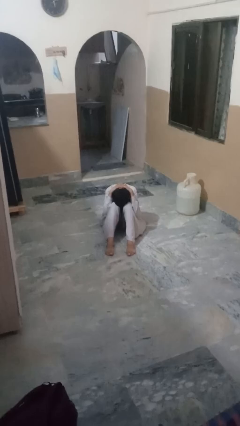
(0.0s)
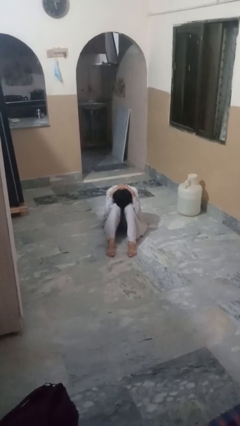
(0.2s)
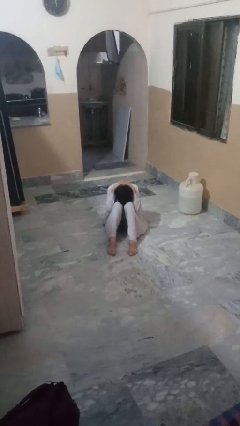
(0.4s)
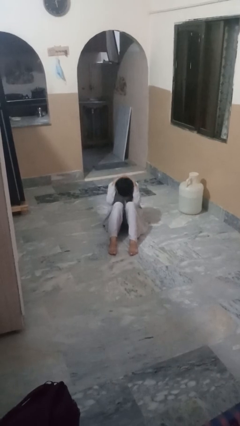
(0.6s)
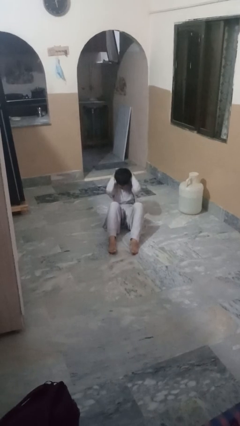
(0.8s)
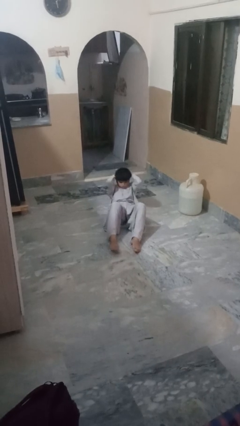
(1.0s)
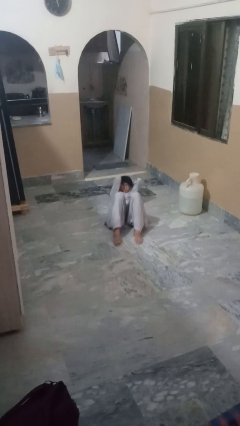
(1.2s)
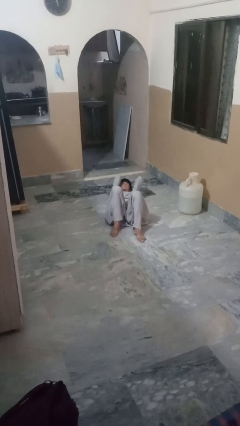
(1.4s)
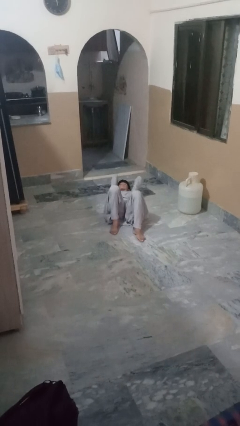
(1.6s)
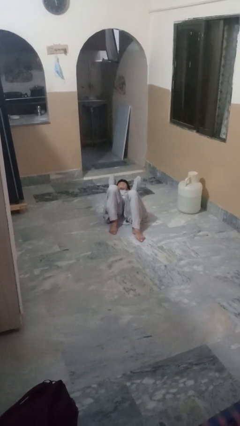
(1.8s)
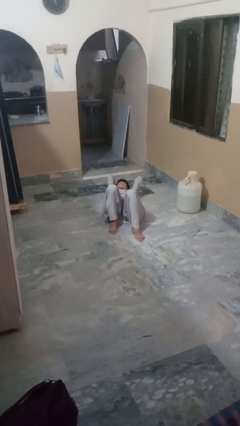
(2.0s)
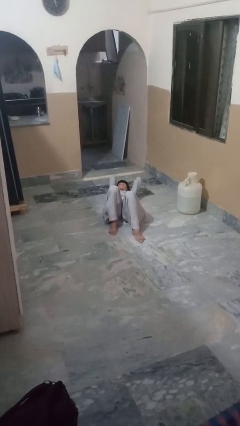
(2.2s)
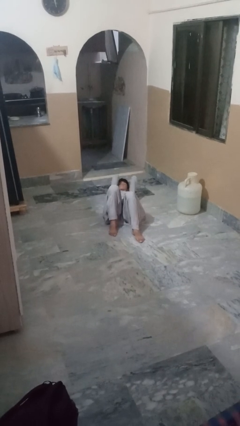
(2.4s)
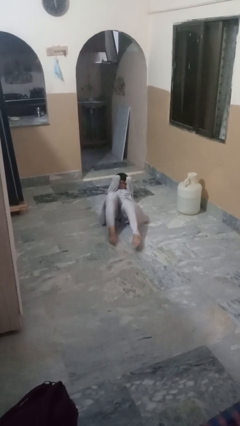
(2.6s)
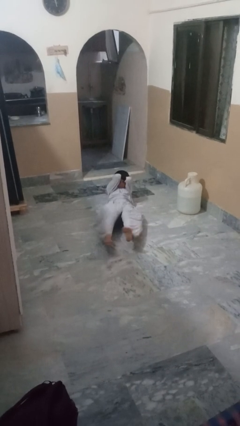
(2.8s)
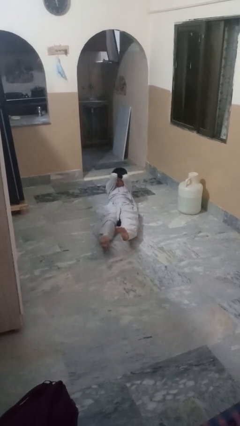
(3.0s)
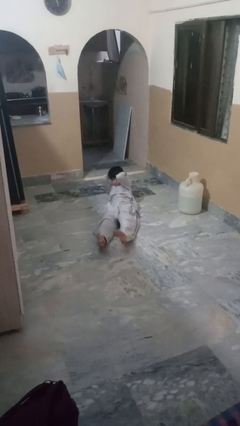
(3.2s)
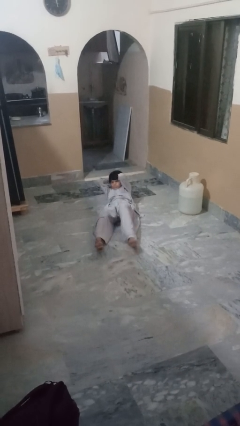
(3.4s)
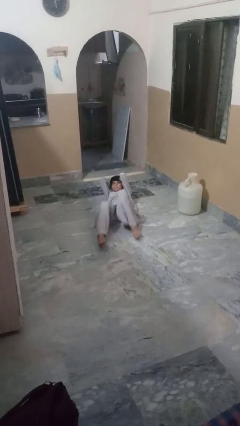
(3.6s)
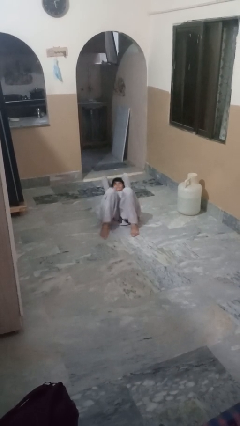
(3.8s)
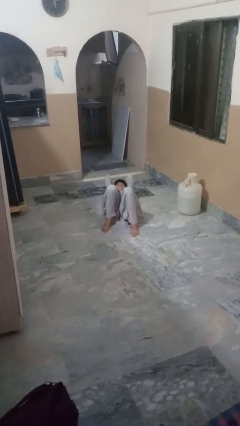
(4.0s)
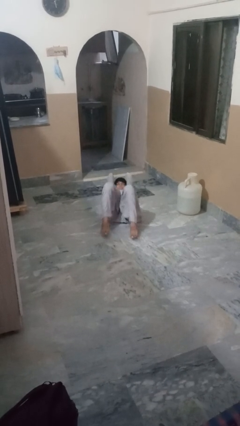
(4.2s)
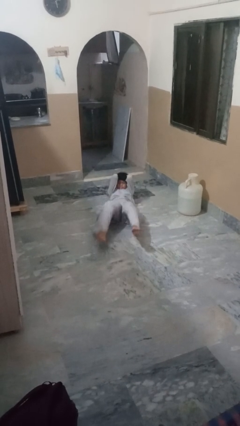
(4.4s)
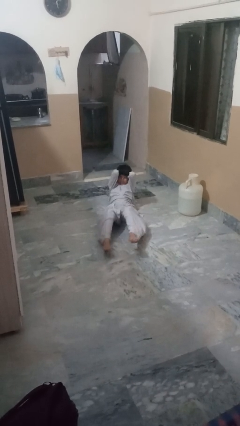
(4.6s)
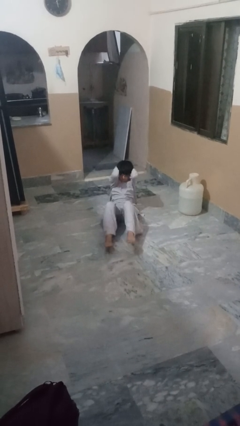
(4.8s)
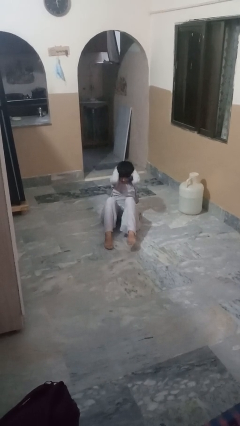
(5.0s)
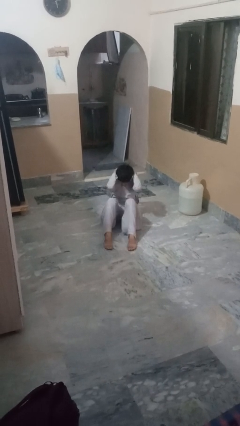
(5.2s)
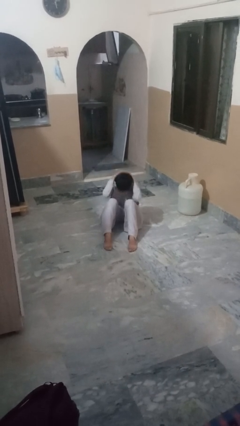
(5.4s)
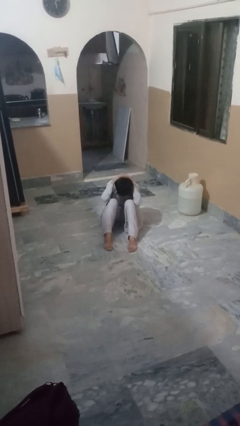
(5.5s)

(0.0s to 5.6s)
person exercises with situp

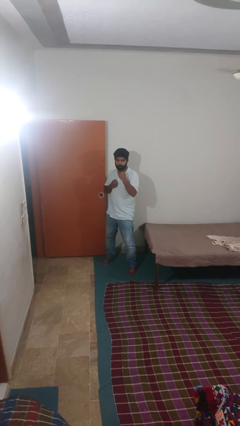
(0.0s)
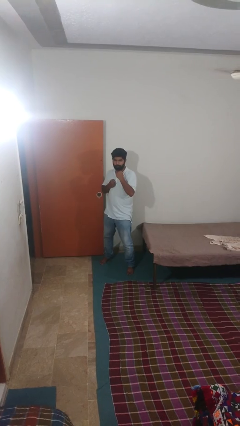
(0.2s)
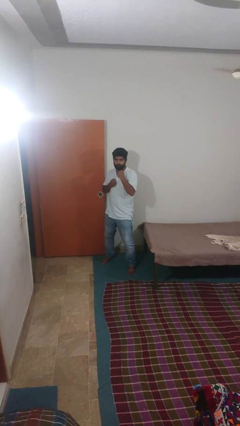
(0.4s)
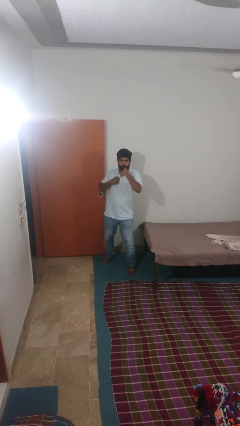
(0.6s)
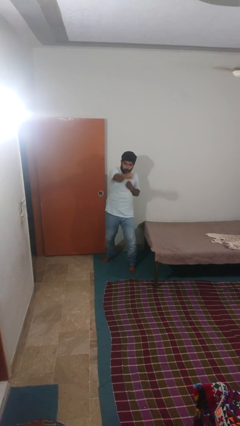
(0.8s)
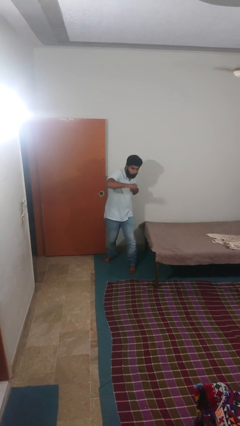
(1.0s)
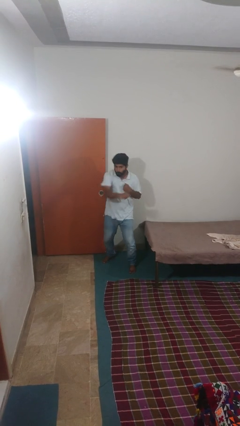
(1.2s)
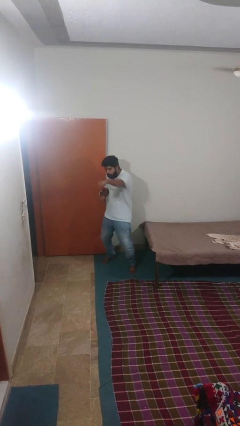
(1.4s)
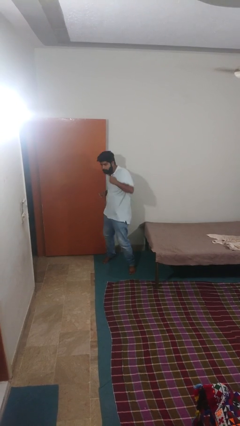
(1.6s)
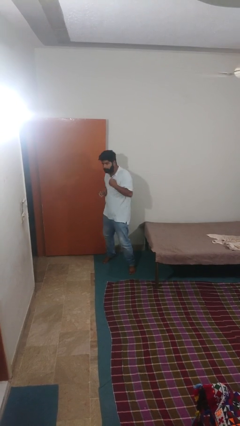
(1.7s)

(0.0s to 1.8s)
person punches

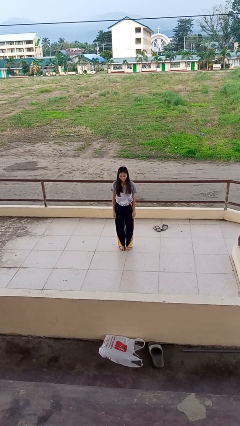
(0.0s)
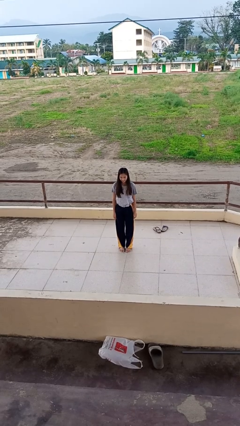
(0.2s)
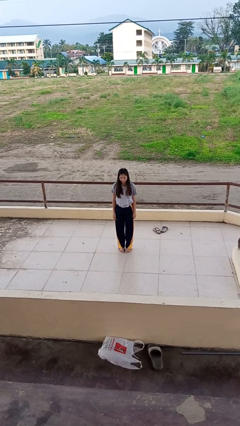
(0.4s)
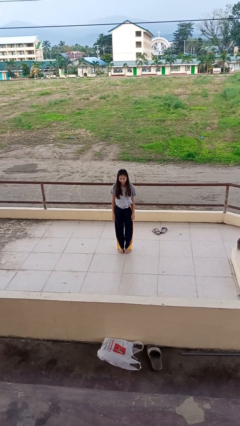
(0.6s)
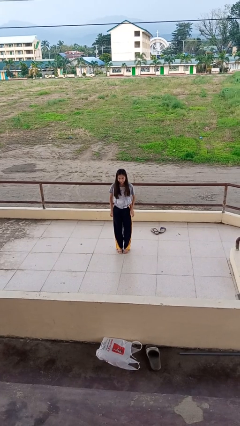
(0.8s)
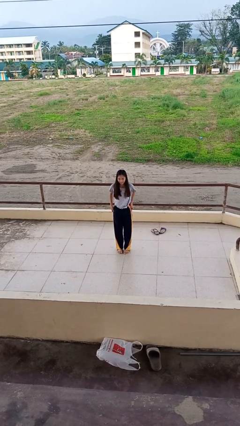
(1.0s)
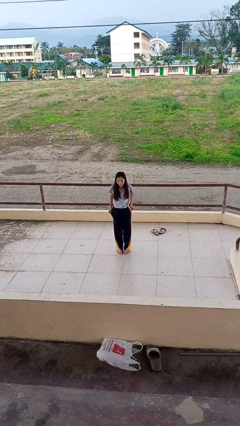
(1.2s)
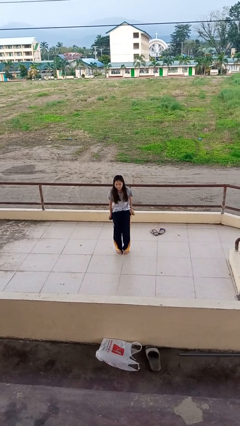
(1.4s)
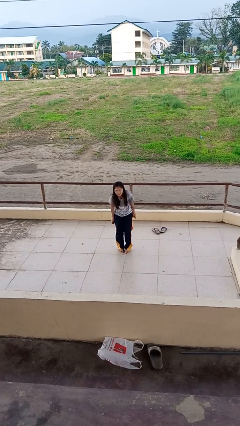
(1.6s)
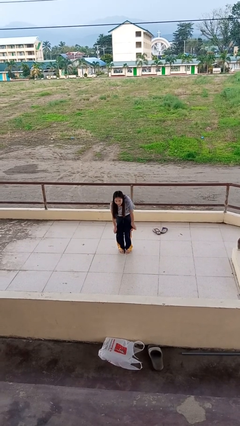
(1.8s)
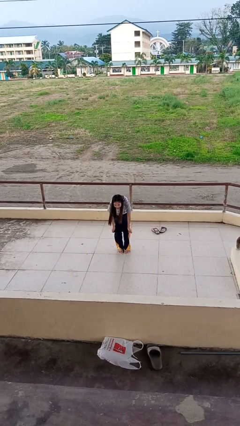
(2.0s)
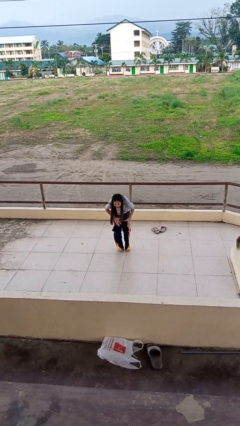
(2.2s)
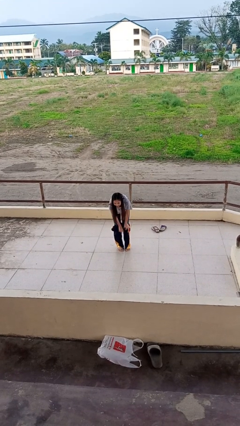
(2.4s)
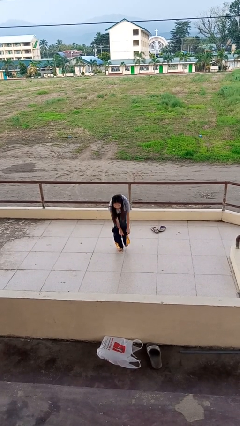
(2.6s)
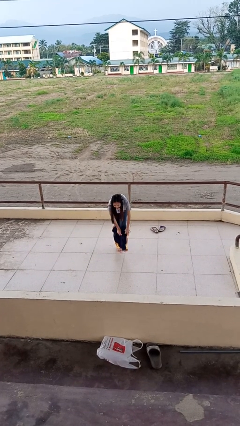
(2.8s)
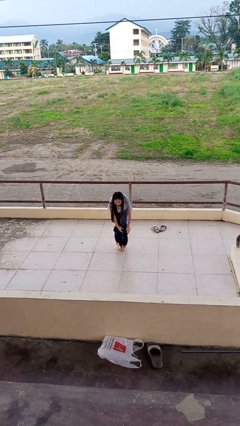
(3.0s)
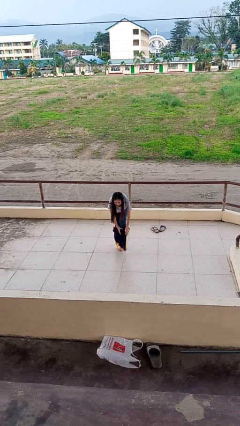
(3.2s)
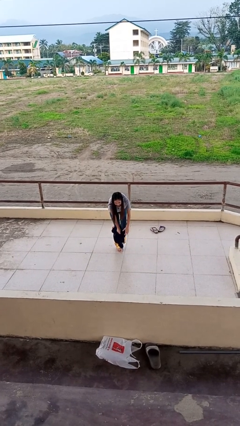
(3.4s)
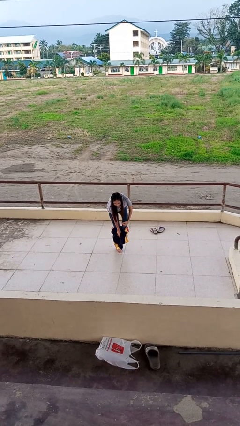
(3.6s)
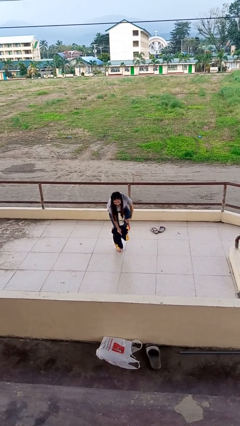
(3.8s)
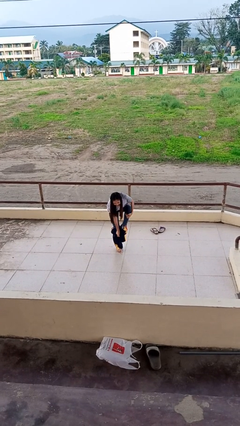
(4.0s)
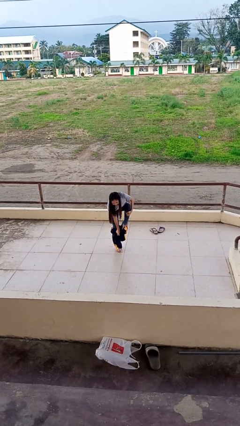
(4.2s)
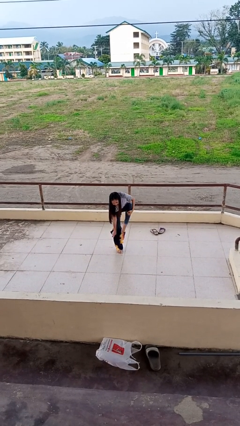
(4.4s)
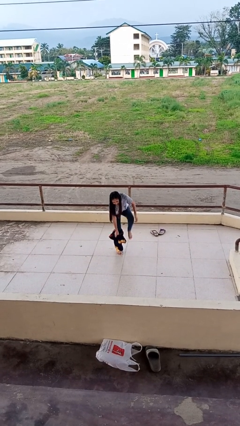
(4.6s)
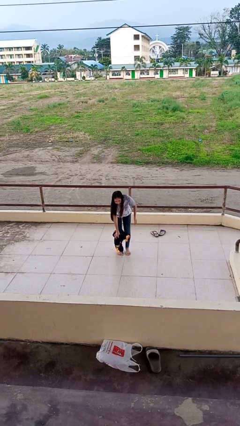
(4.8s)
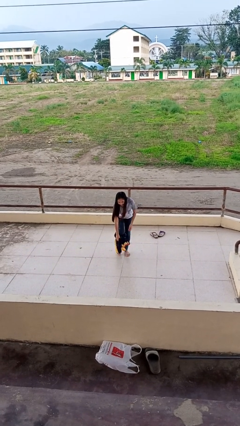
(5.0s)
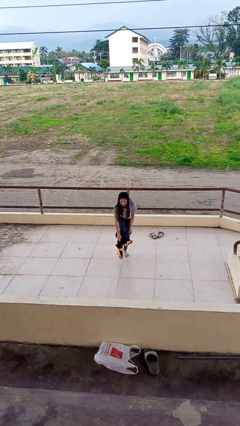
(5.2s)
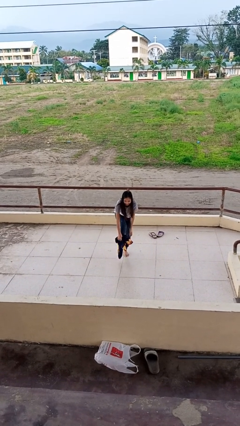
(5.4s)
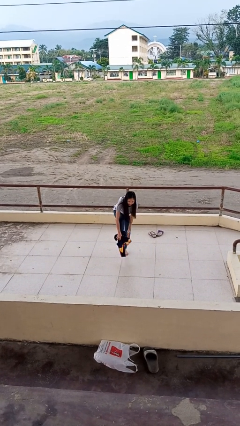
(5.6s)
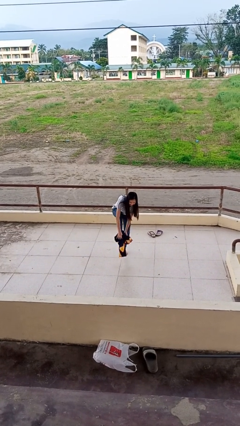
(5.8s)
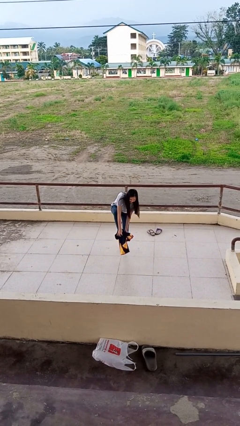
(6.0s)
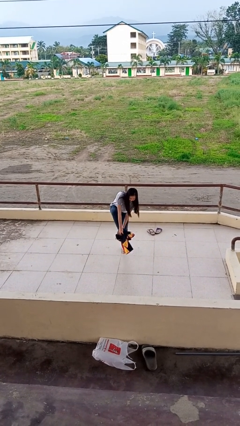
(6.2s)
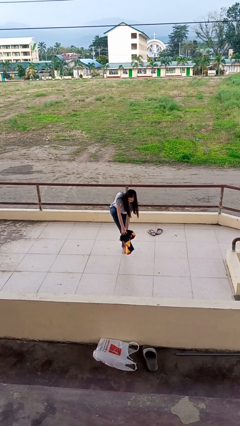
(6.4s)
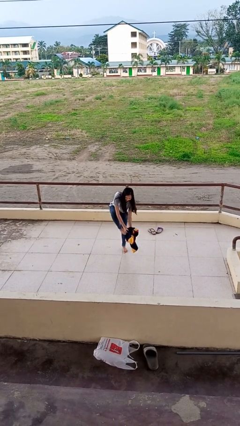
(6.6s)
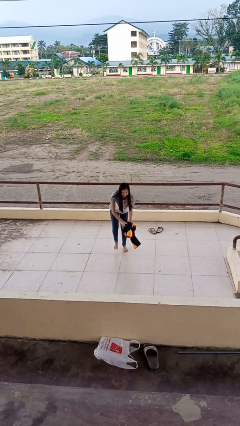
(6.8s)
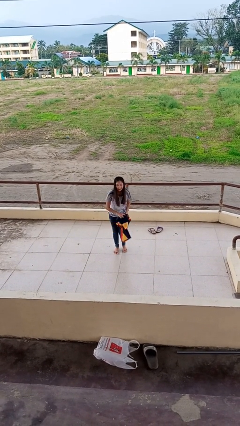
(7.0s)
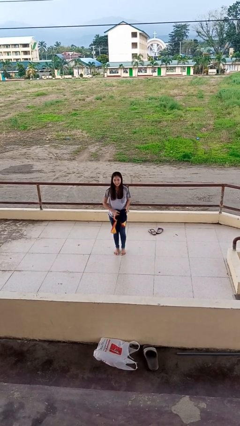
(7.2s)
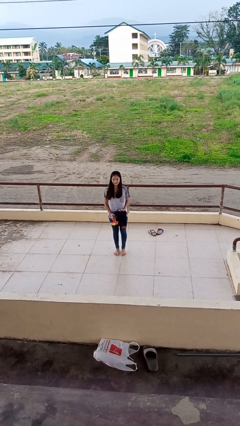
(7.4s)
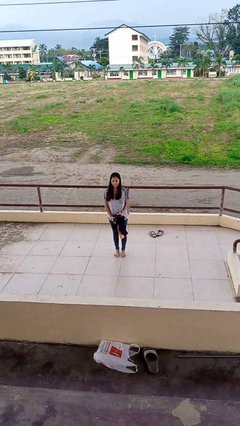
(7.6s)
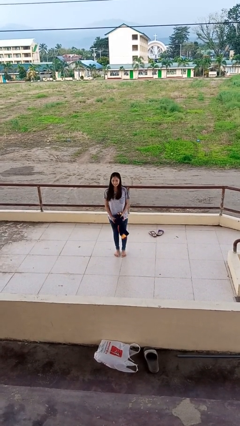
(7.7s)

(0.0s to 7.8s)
person takes off pants

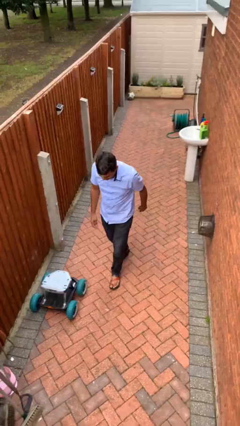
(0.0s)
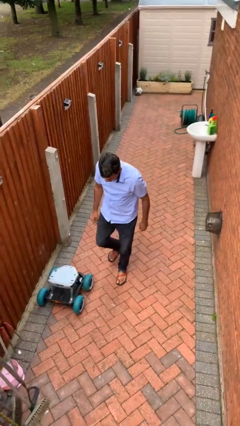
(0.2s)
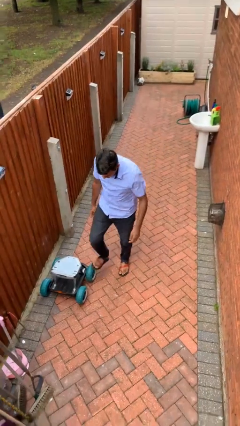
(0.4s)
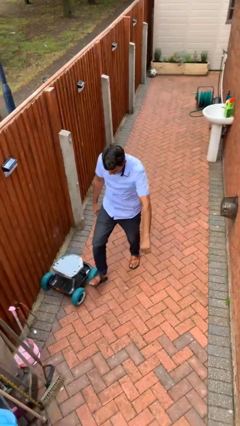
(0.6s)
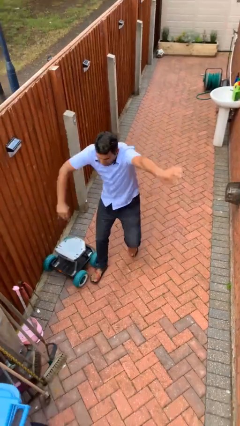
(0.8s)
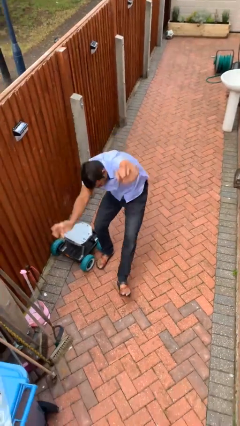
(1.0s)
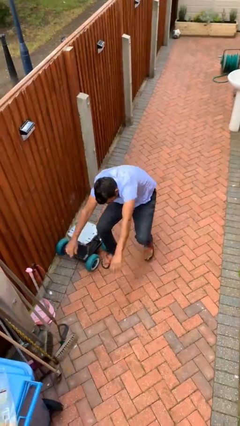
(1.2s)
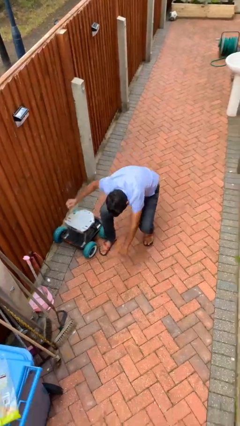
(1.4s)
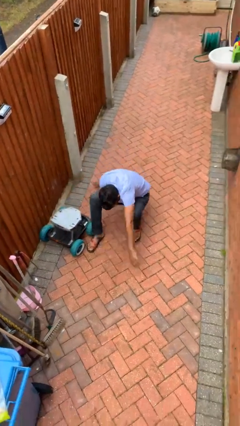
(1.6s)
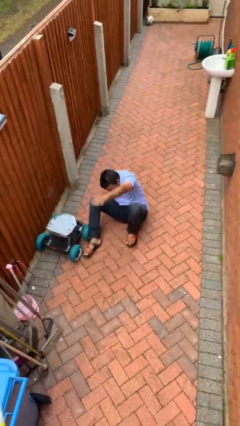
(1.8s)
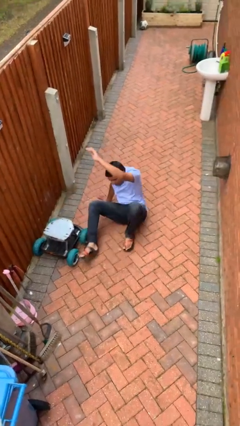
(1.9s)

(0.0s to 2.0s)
person trips on object on floor

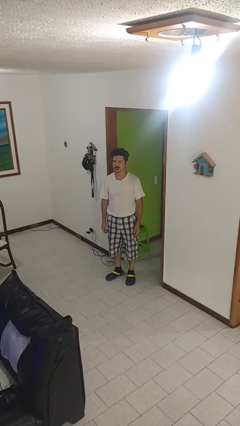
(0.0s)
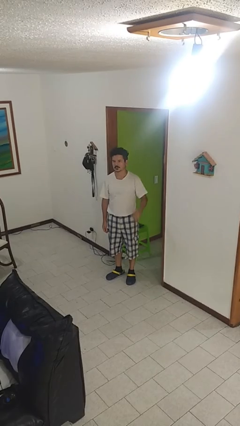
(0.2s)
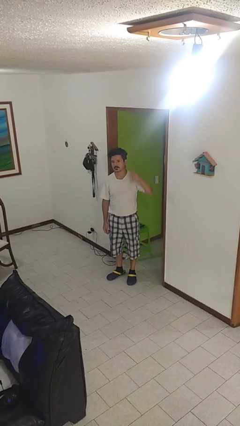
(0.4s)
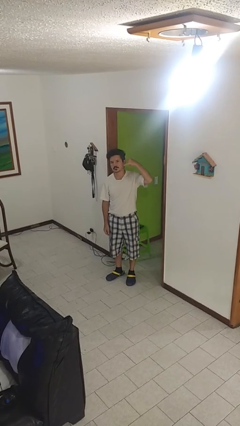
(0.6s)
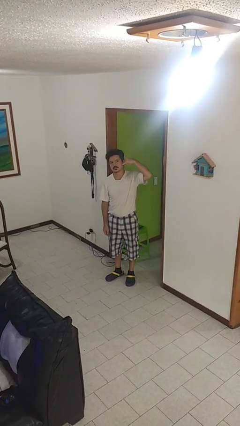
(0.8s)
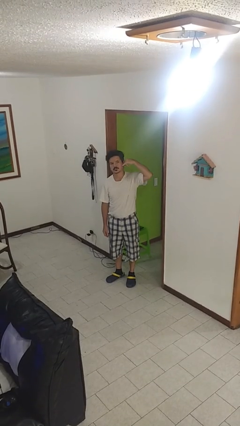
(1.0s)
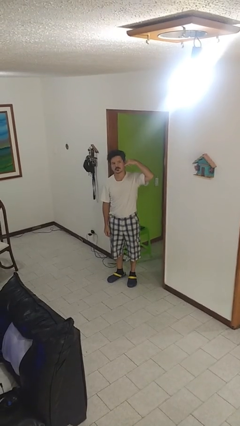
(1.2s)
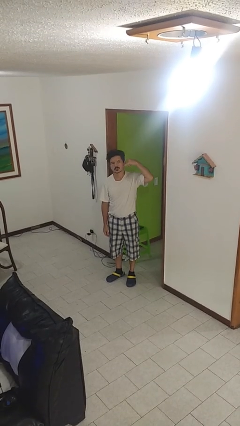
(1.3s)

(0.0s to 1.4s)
person gestures call me
